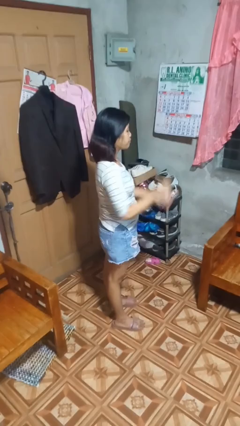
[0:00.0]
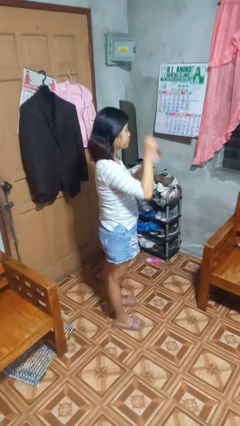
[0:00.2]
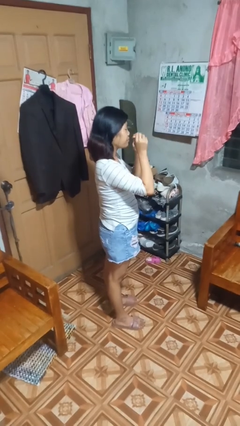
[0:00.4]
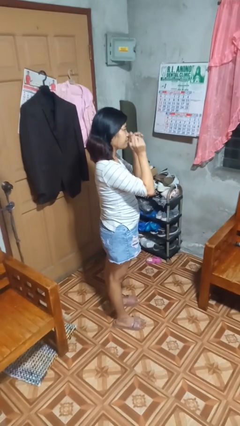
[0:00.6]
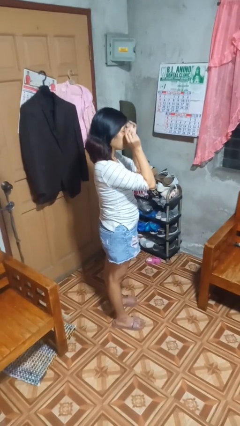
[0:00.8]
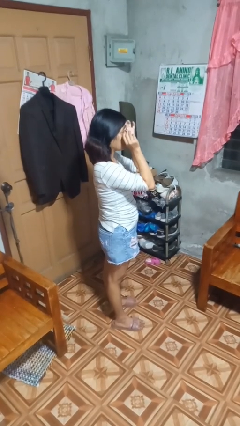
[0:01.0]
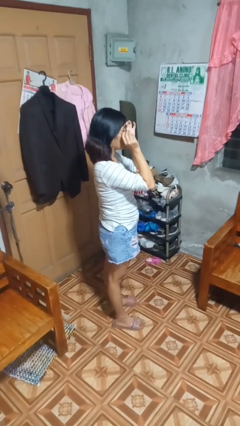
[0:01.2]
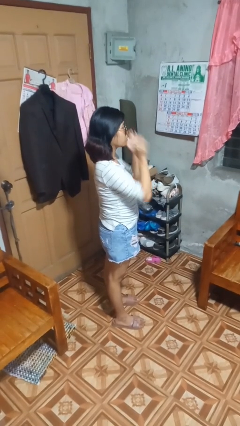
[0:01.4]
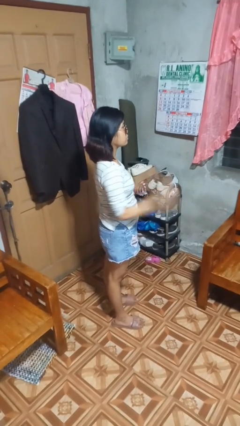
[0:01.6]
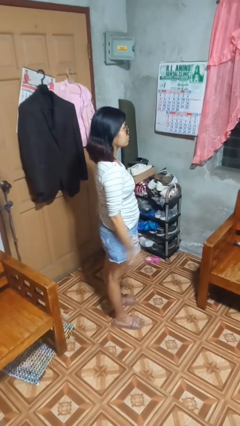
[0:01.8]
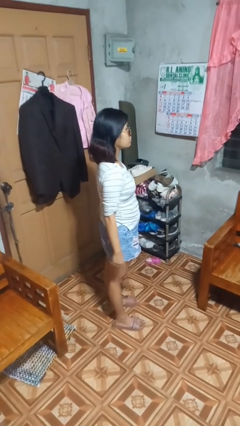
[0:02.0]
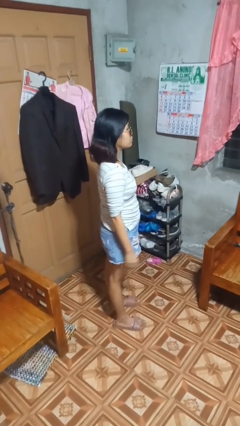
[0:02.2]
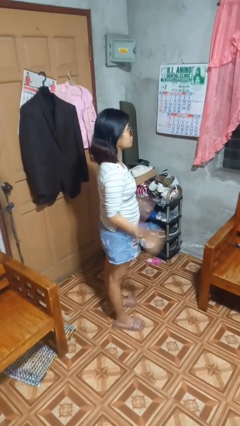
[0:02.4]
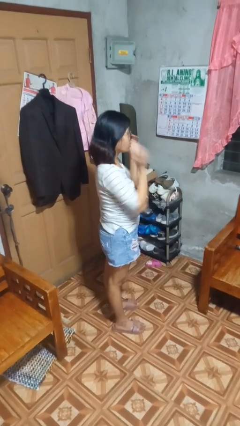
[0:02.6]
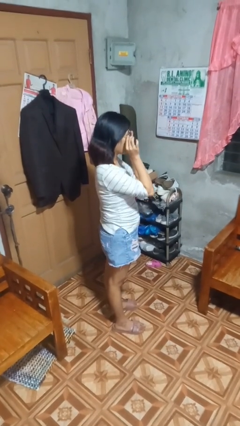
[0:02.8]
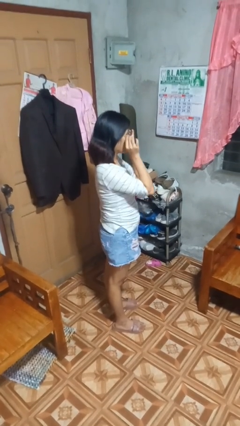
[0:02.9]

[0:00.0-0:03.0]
person puts on sunglasses

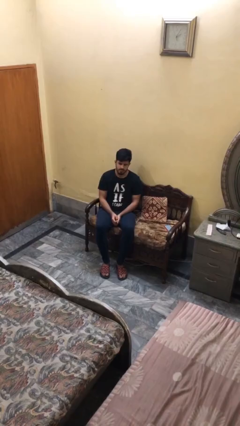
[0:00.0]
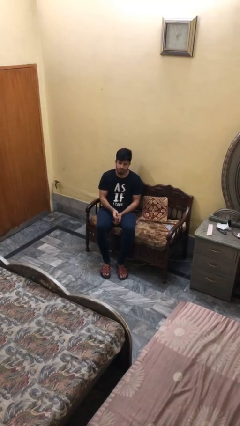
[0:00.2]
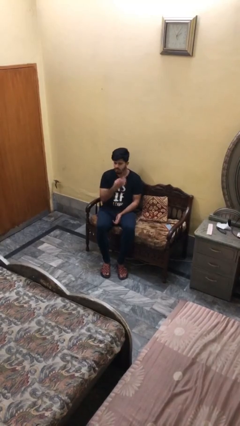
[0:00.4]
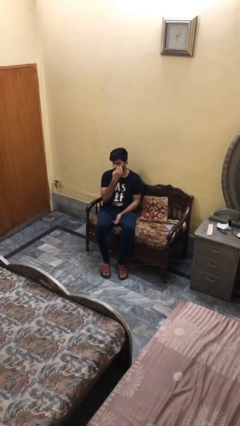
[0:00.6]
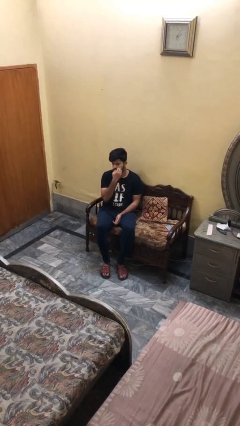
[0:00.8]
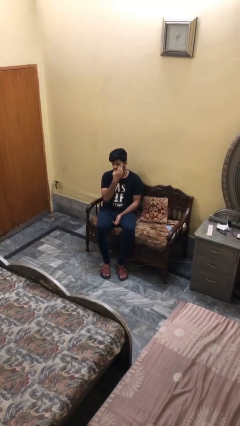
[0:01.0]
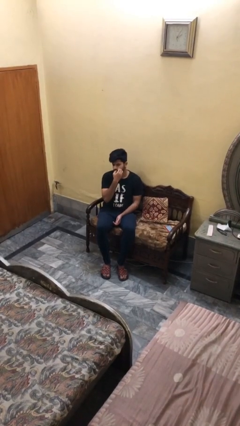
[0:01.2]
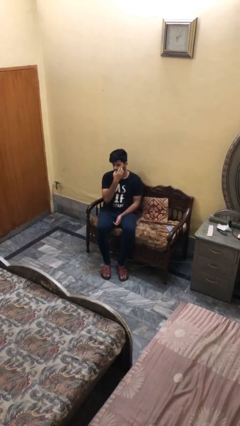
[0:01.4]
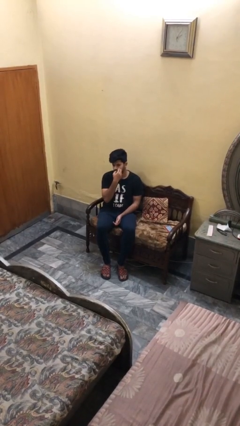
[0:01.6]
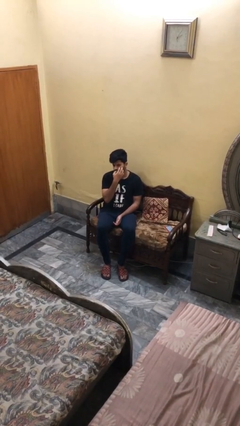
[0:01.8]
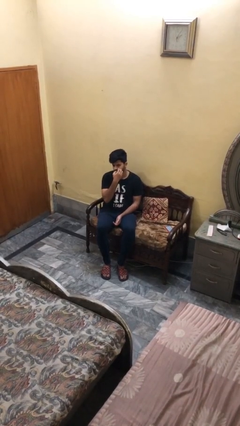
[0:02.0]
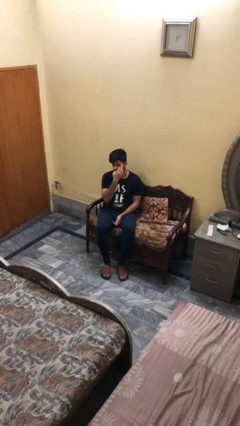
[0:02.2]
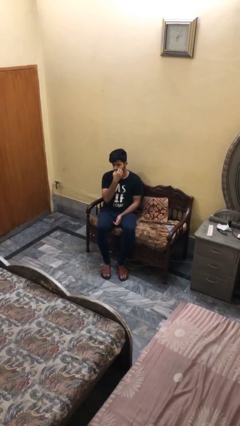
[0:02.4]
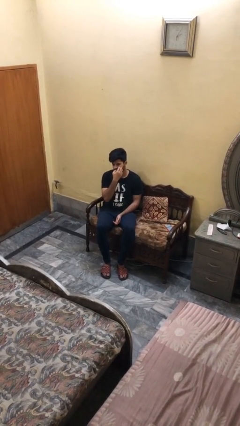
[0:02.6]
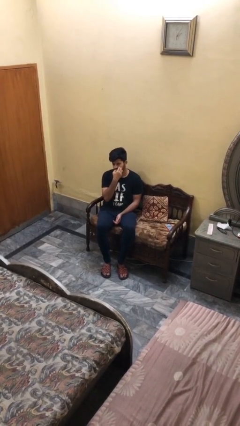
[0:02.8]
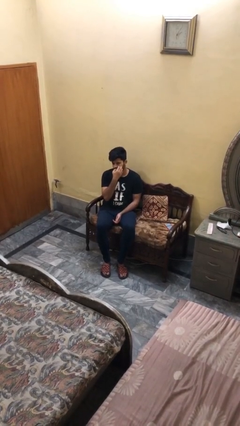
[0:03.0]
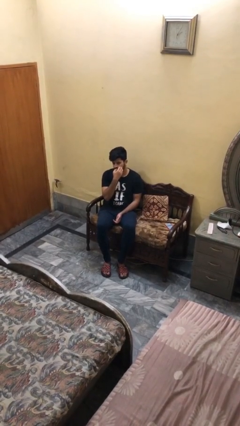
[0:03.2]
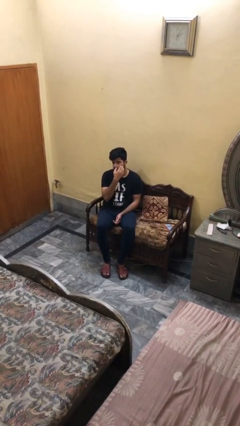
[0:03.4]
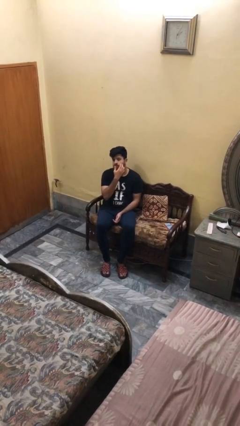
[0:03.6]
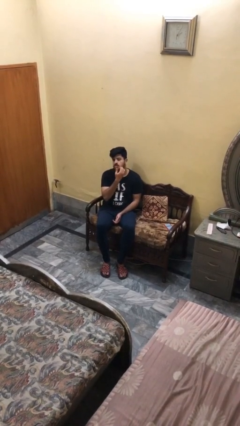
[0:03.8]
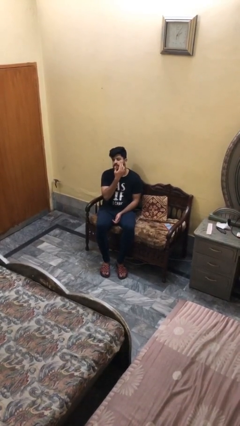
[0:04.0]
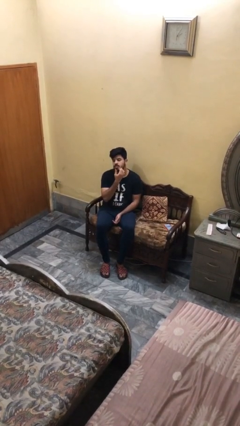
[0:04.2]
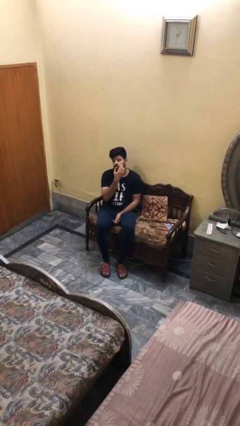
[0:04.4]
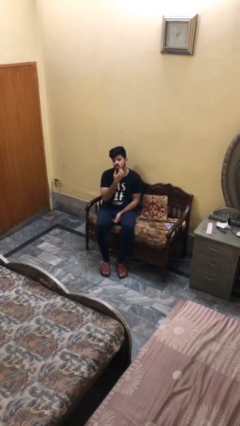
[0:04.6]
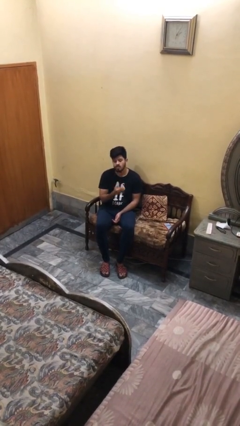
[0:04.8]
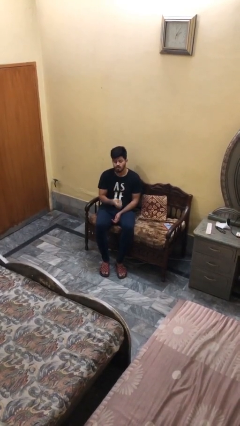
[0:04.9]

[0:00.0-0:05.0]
person scratches face

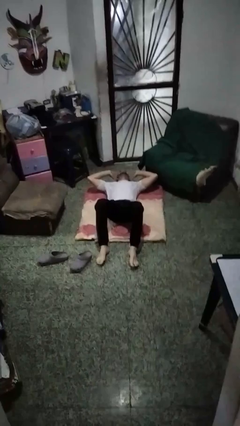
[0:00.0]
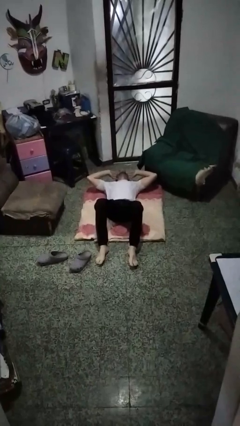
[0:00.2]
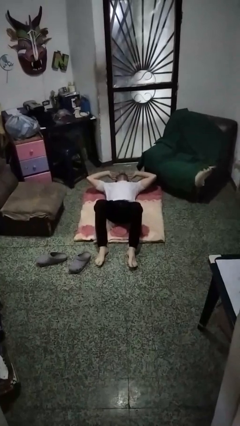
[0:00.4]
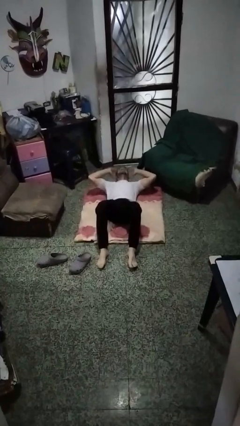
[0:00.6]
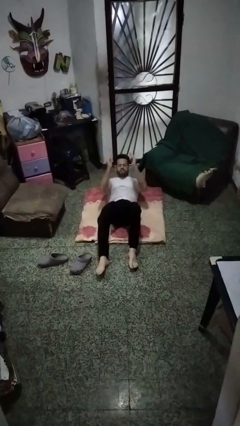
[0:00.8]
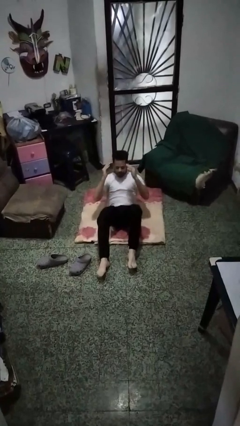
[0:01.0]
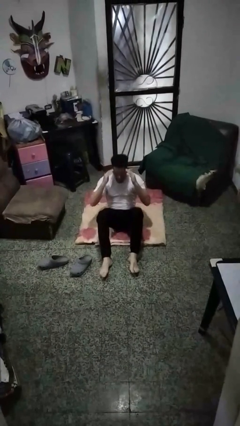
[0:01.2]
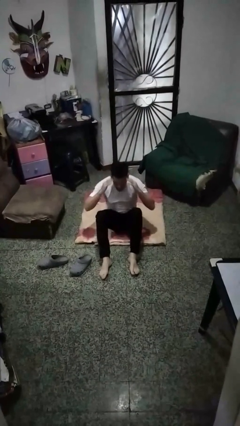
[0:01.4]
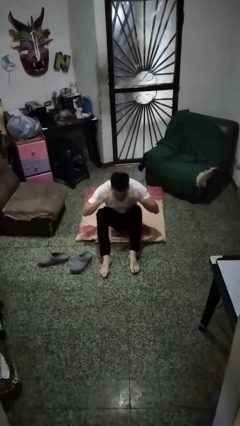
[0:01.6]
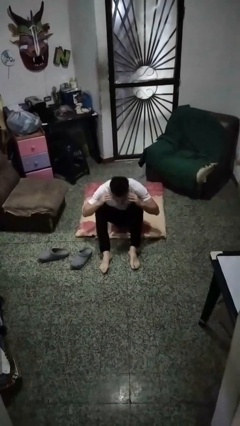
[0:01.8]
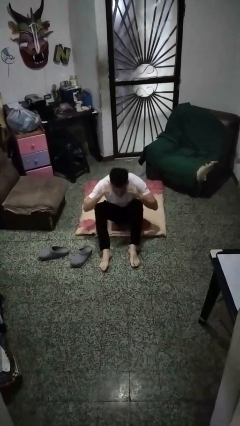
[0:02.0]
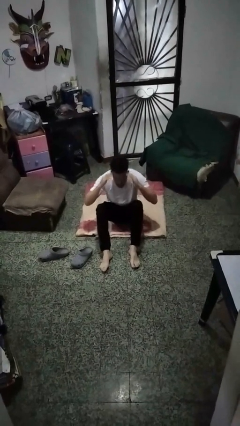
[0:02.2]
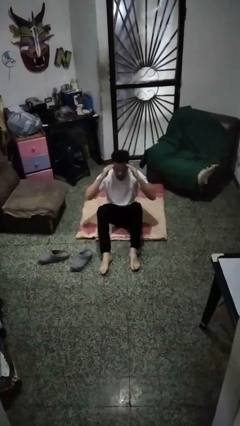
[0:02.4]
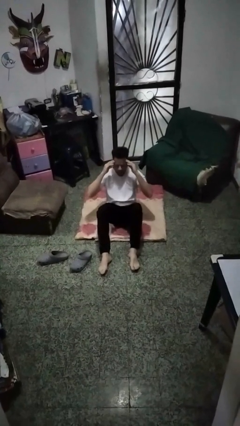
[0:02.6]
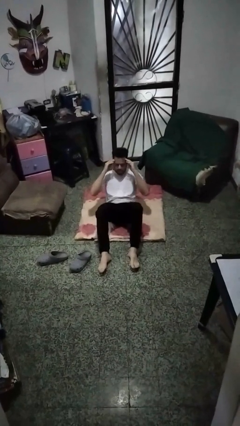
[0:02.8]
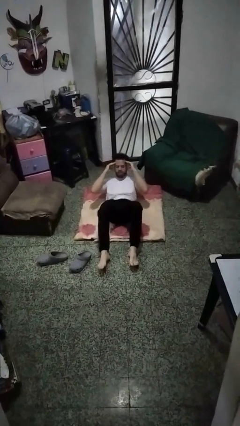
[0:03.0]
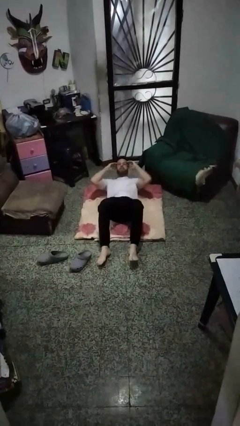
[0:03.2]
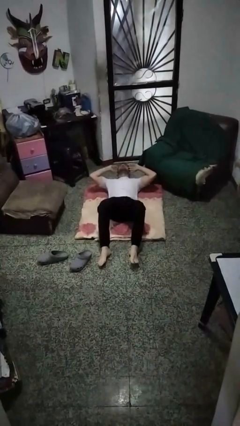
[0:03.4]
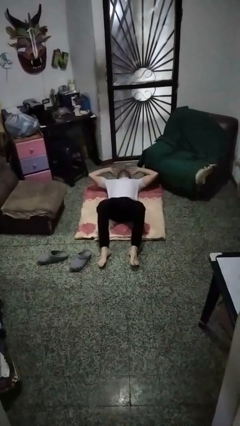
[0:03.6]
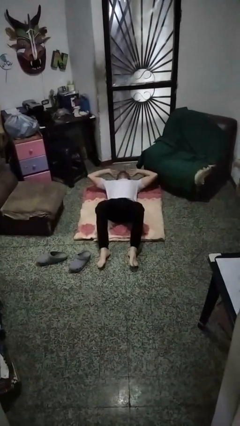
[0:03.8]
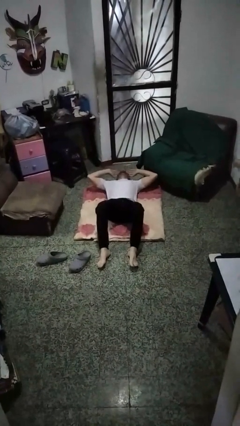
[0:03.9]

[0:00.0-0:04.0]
person exercises with situp

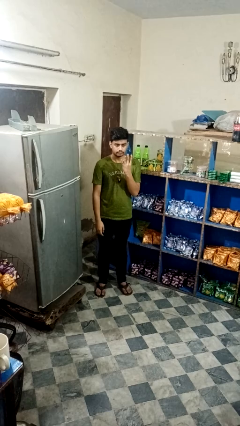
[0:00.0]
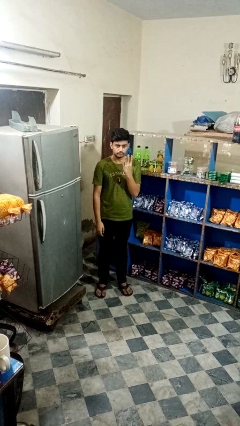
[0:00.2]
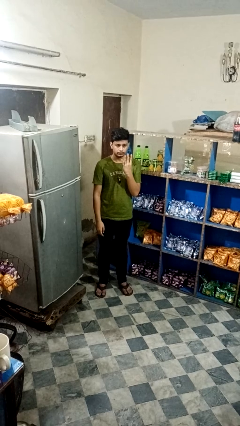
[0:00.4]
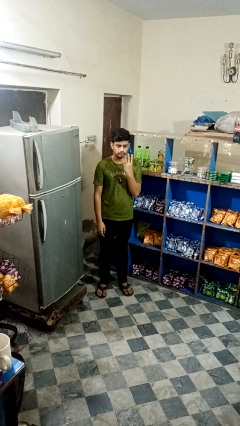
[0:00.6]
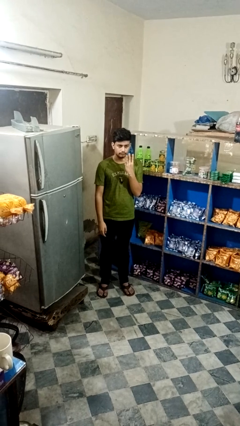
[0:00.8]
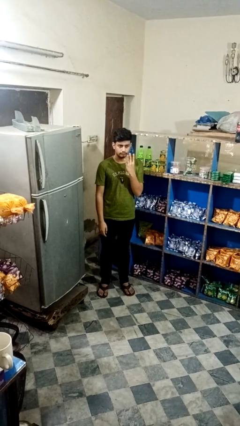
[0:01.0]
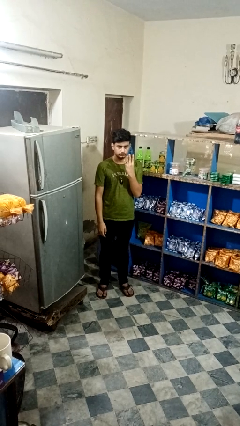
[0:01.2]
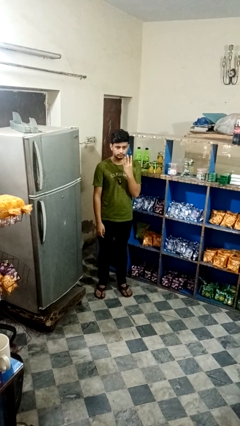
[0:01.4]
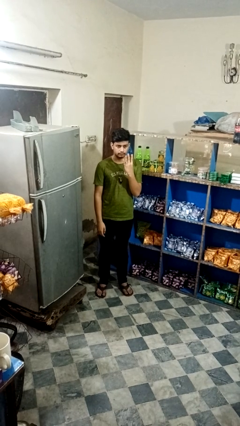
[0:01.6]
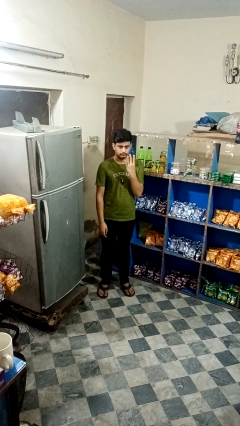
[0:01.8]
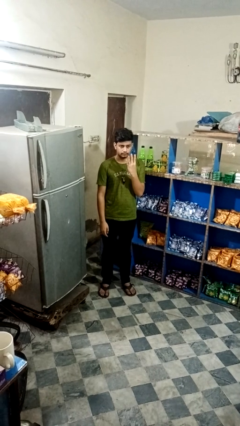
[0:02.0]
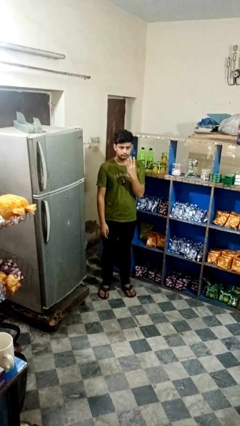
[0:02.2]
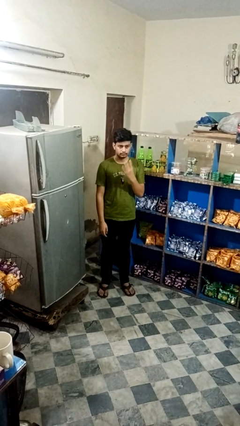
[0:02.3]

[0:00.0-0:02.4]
person gestures number four

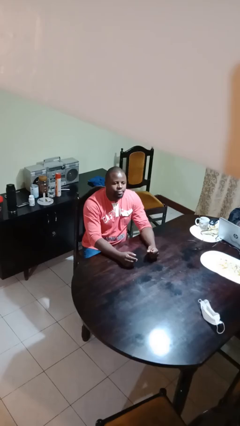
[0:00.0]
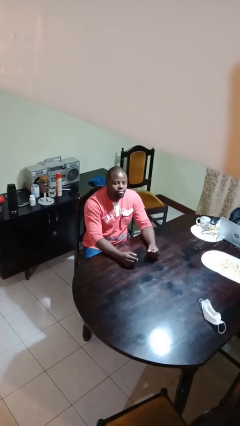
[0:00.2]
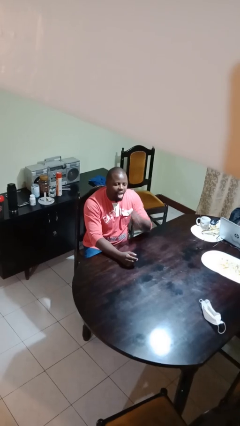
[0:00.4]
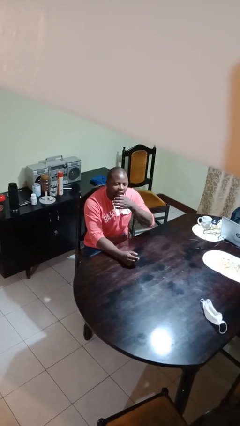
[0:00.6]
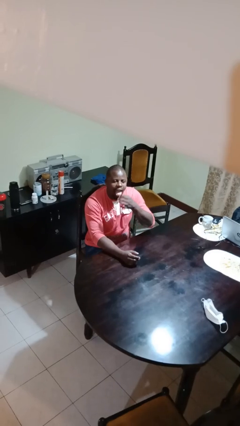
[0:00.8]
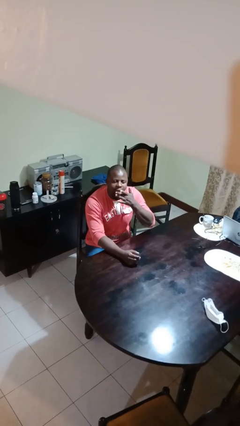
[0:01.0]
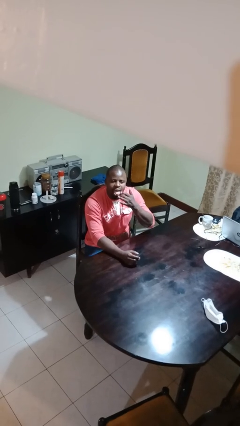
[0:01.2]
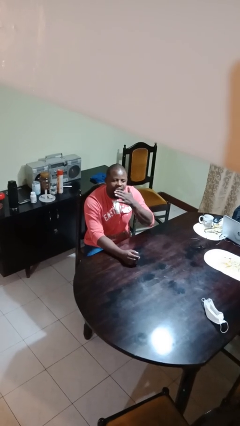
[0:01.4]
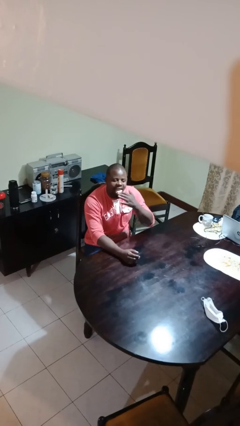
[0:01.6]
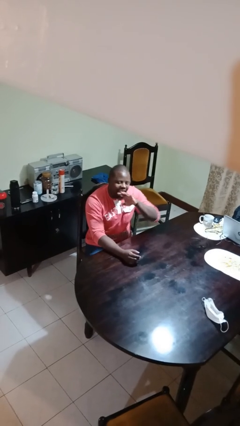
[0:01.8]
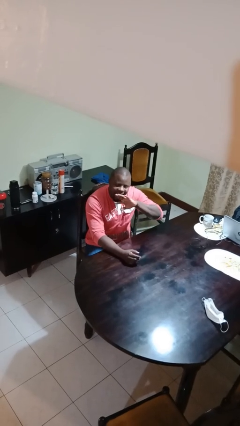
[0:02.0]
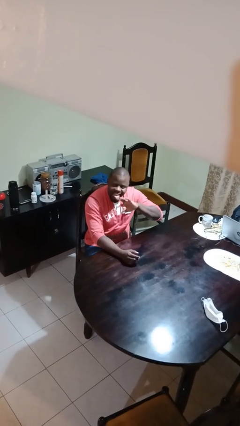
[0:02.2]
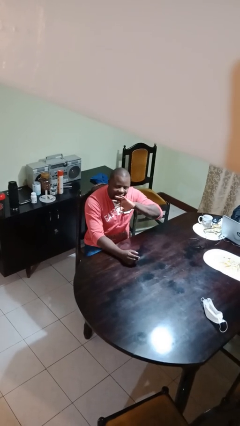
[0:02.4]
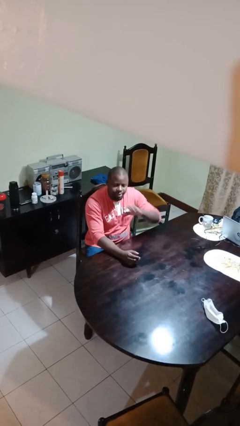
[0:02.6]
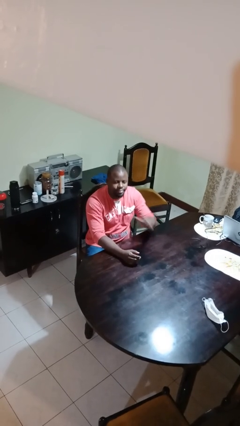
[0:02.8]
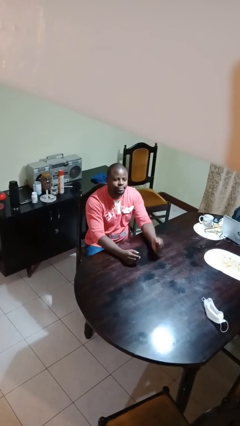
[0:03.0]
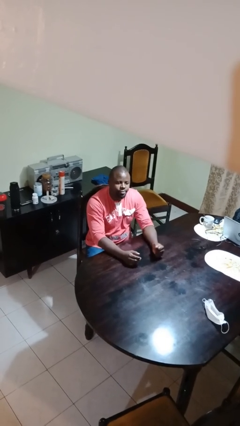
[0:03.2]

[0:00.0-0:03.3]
person licks fingers
